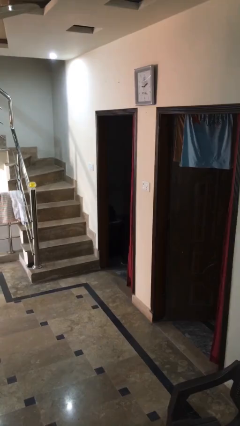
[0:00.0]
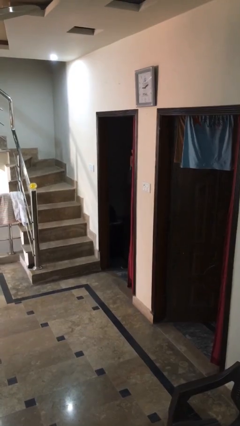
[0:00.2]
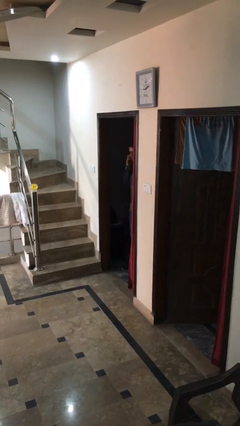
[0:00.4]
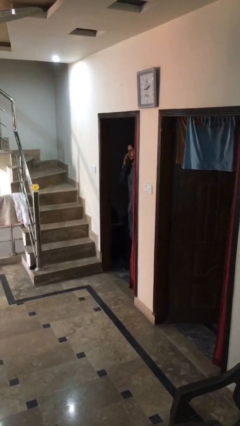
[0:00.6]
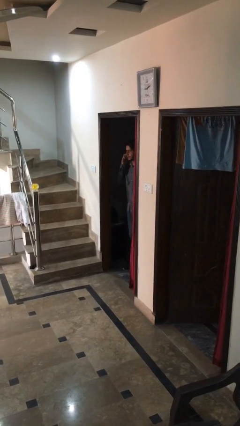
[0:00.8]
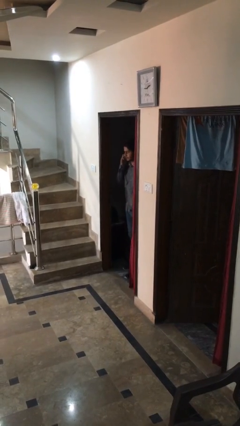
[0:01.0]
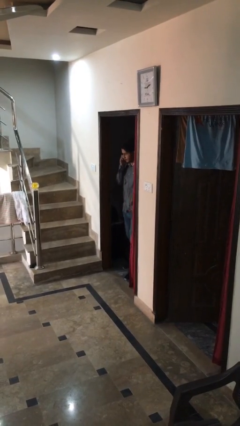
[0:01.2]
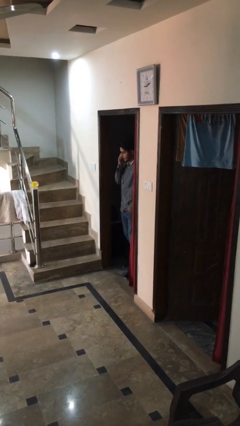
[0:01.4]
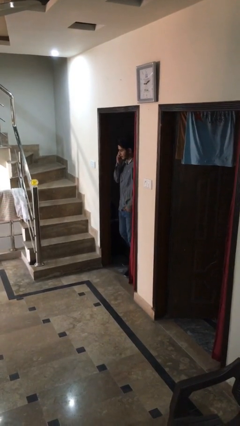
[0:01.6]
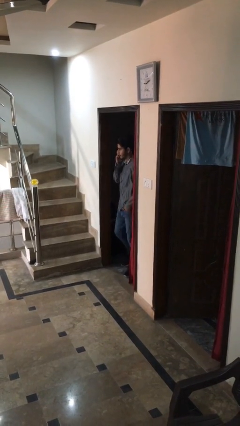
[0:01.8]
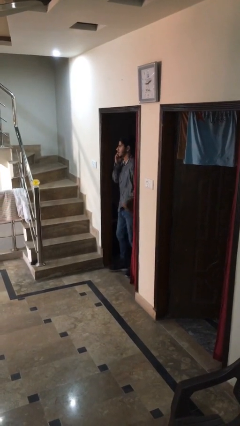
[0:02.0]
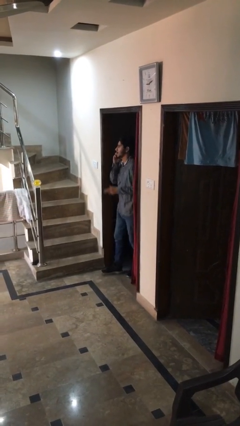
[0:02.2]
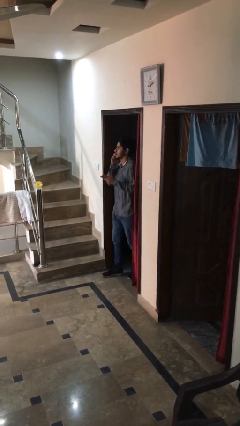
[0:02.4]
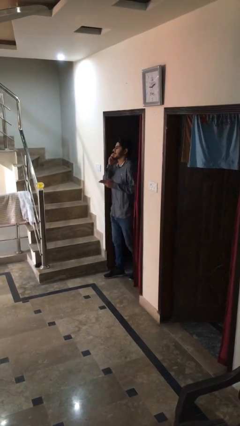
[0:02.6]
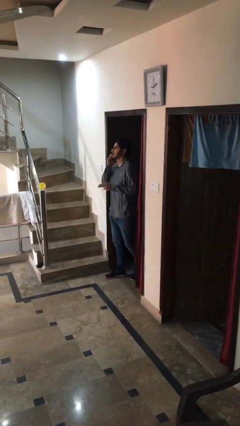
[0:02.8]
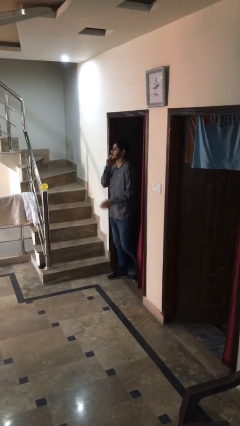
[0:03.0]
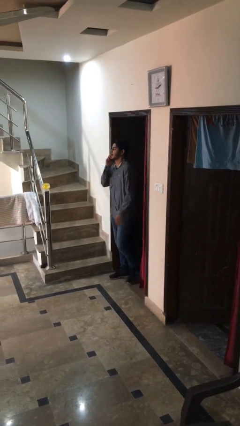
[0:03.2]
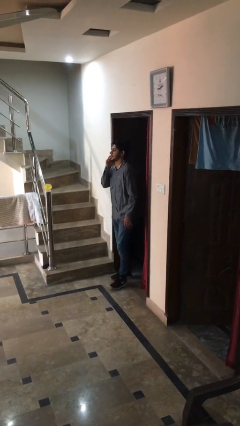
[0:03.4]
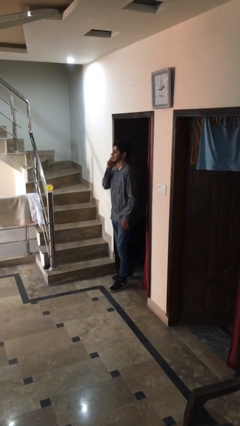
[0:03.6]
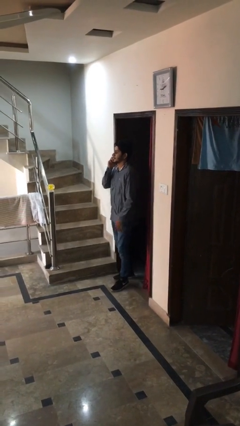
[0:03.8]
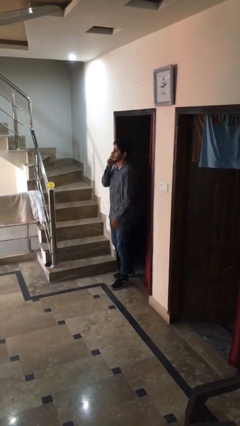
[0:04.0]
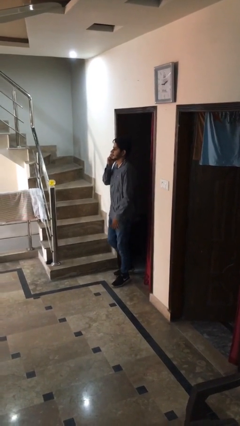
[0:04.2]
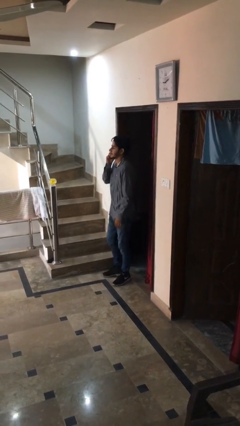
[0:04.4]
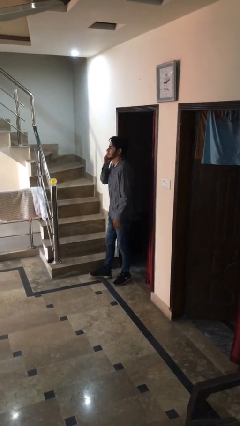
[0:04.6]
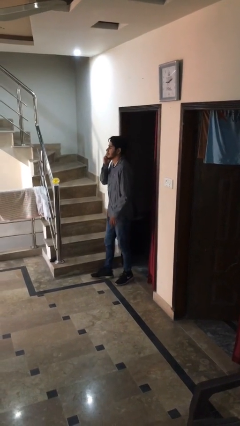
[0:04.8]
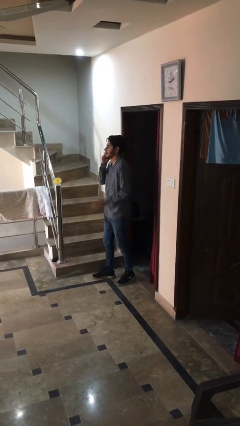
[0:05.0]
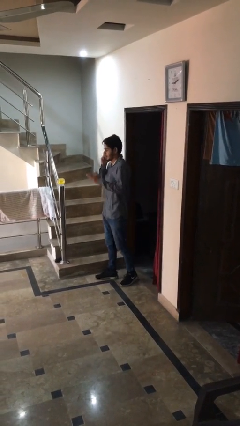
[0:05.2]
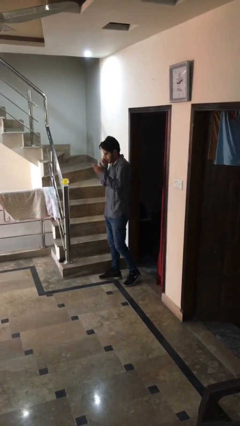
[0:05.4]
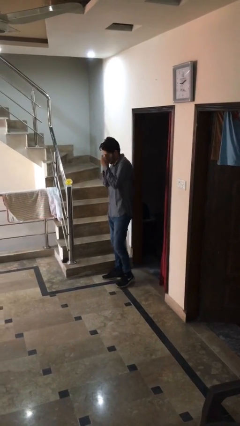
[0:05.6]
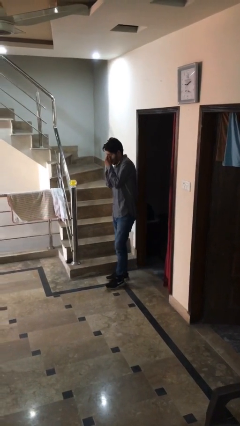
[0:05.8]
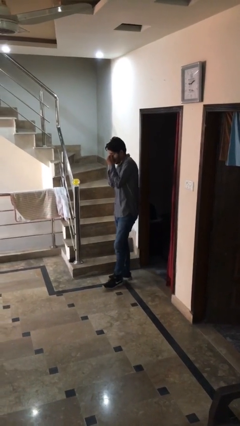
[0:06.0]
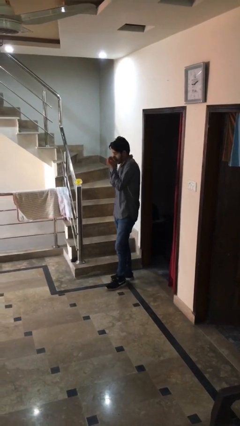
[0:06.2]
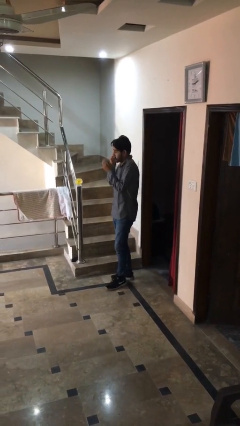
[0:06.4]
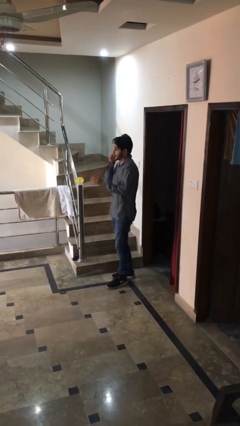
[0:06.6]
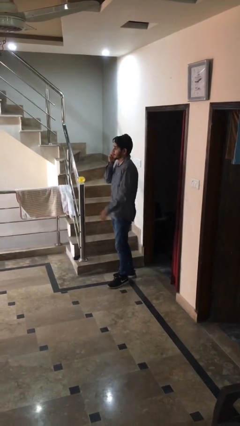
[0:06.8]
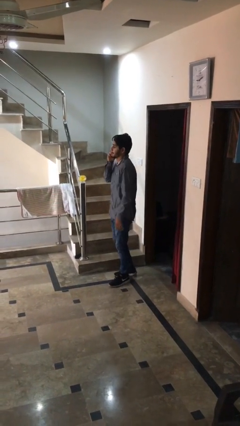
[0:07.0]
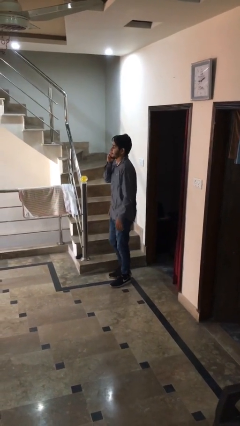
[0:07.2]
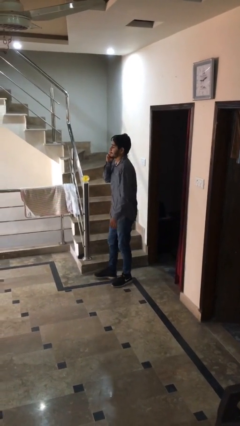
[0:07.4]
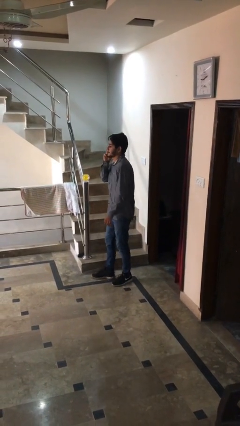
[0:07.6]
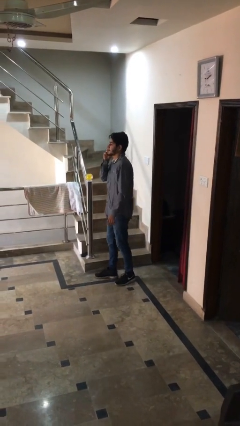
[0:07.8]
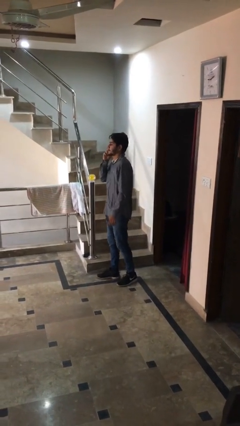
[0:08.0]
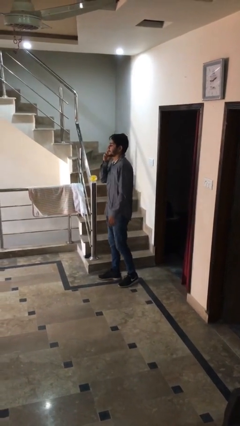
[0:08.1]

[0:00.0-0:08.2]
person enters scene through structure

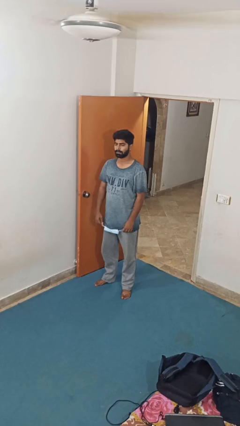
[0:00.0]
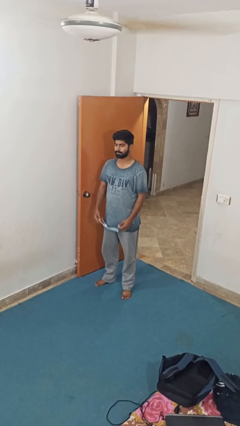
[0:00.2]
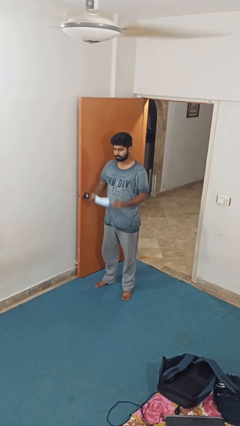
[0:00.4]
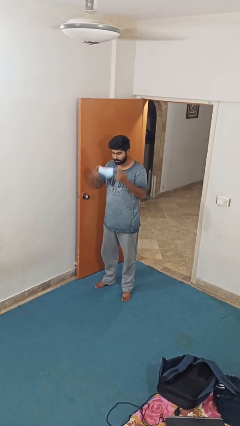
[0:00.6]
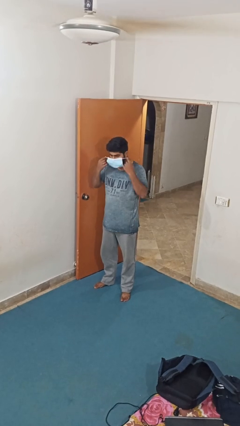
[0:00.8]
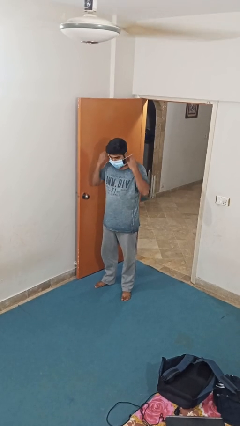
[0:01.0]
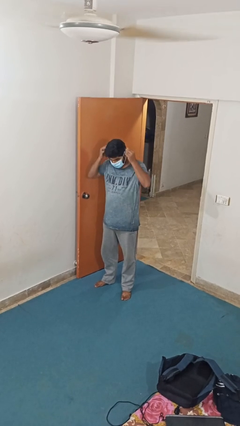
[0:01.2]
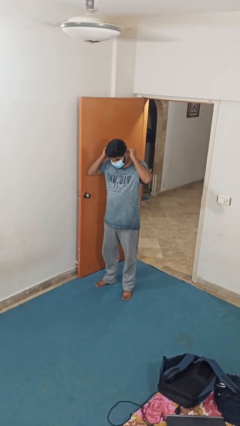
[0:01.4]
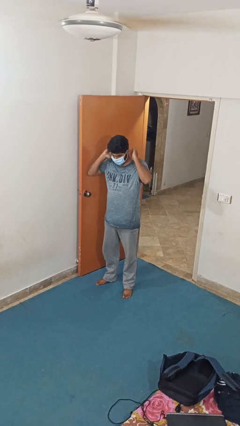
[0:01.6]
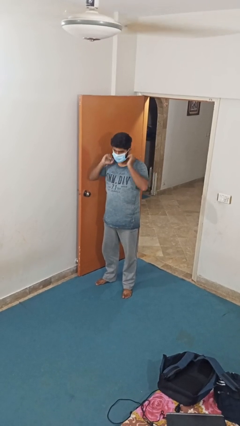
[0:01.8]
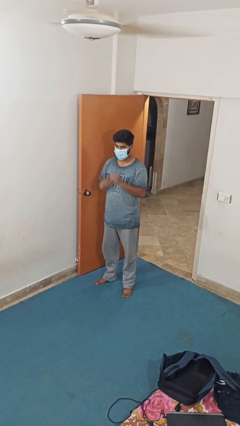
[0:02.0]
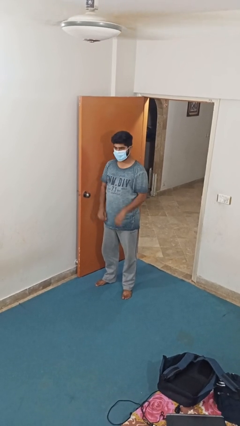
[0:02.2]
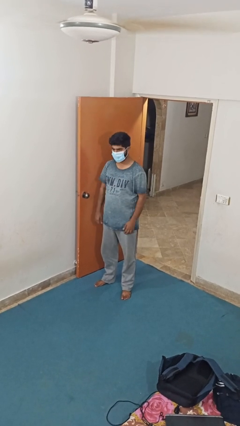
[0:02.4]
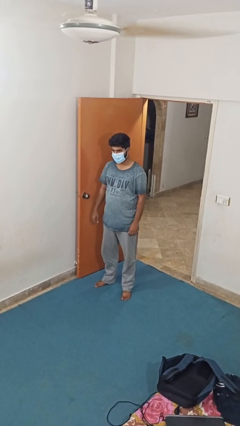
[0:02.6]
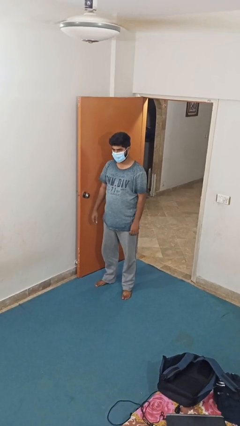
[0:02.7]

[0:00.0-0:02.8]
person puts on facemask

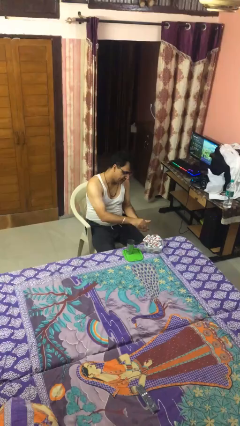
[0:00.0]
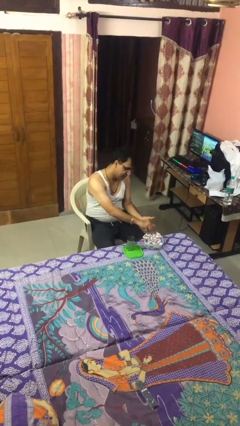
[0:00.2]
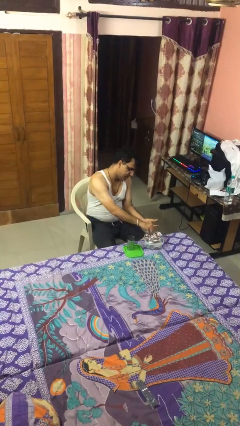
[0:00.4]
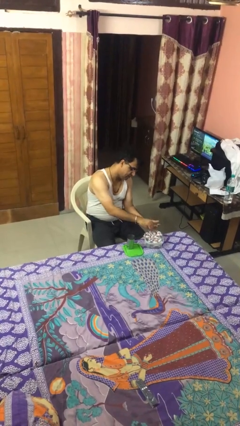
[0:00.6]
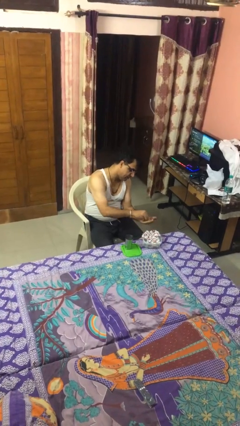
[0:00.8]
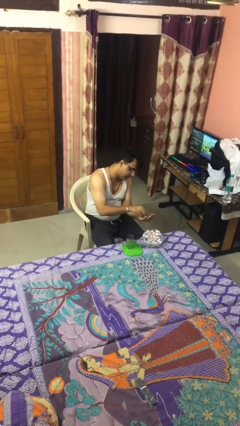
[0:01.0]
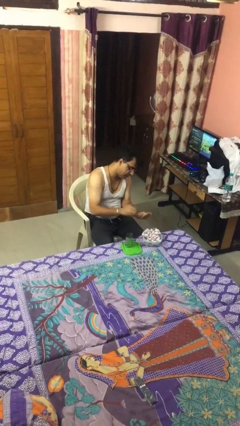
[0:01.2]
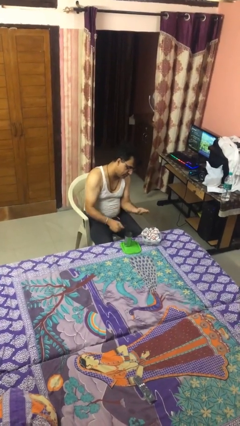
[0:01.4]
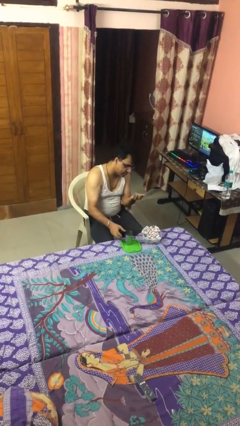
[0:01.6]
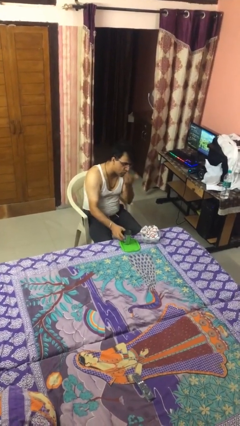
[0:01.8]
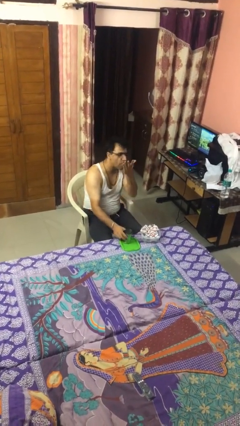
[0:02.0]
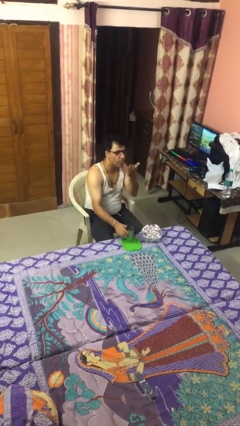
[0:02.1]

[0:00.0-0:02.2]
person takes medicine pills

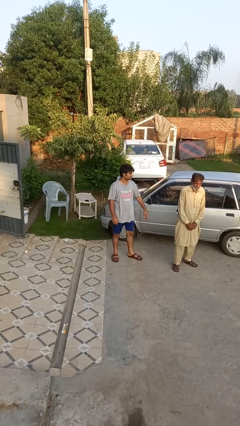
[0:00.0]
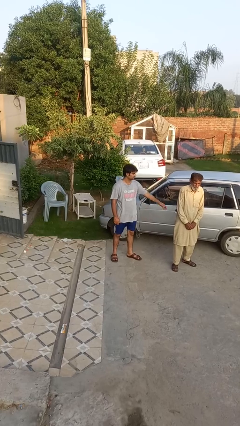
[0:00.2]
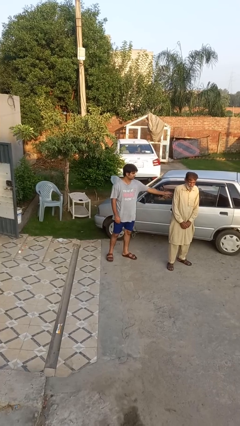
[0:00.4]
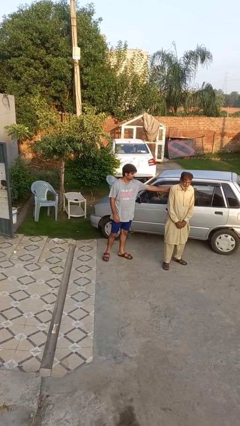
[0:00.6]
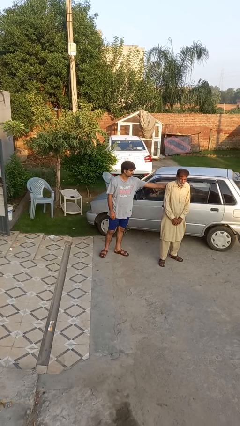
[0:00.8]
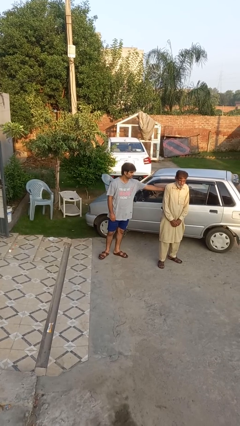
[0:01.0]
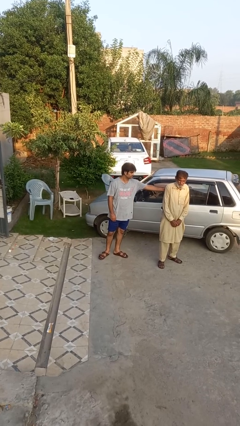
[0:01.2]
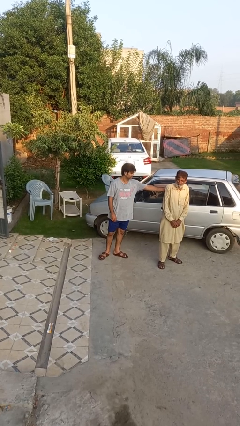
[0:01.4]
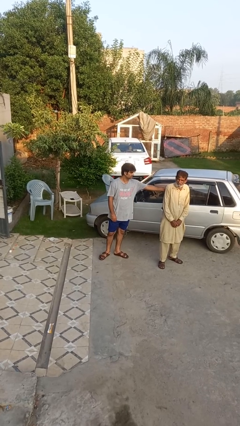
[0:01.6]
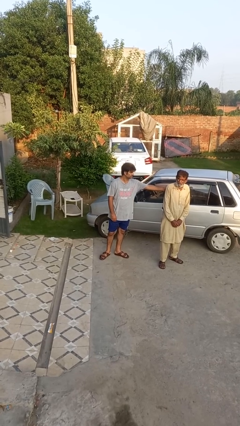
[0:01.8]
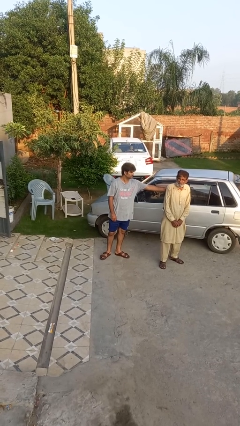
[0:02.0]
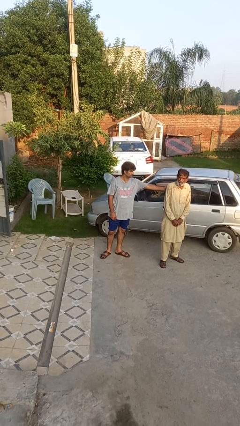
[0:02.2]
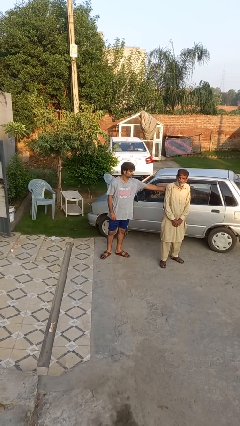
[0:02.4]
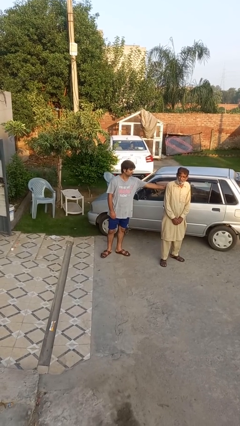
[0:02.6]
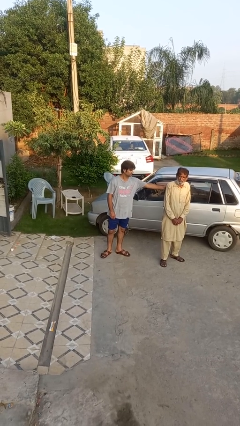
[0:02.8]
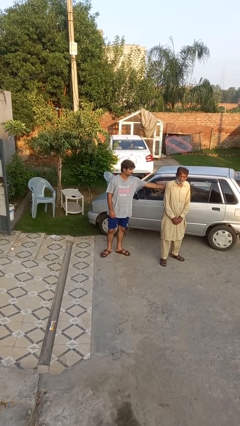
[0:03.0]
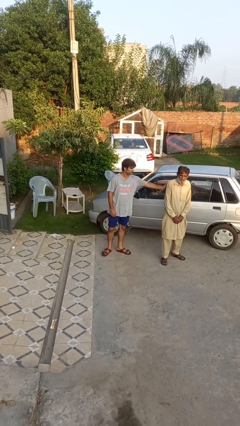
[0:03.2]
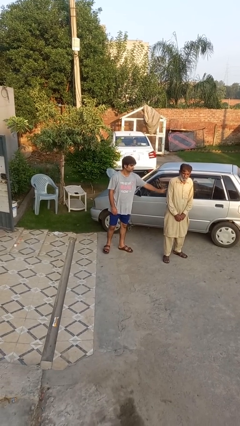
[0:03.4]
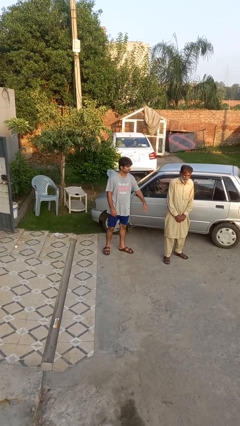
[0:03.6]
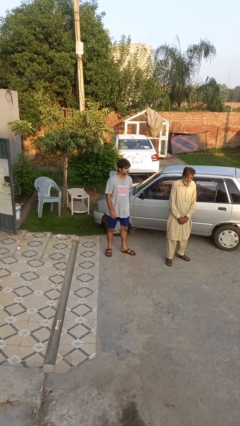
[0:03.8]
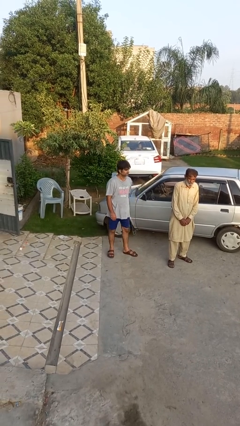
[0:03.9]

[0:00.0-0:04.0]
person touches back of person

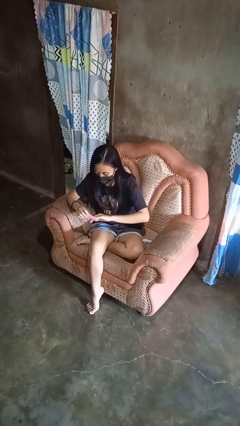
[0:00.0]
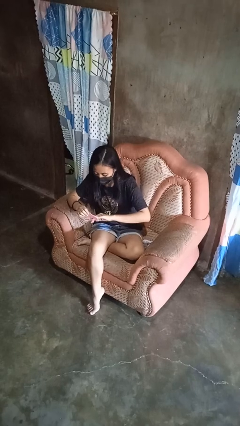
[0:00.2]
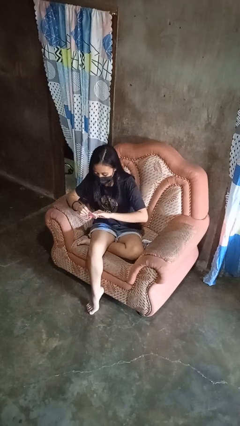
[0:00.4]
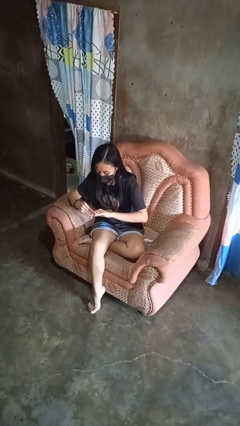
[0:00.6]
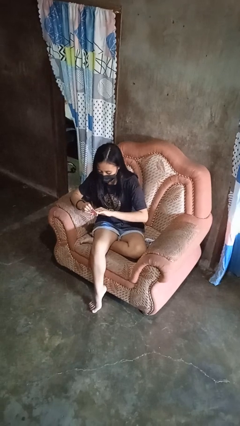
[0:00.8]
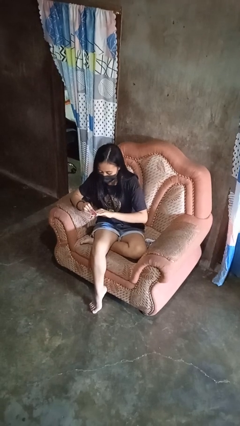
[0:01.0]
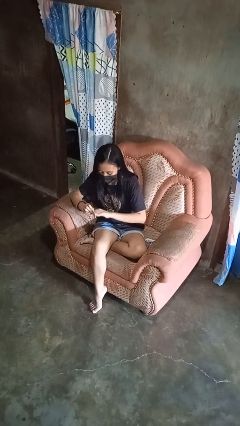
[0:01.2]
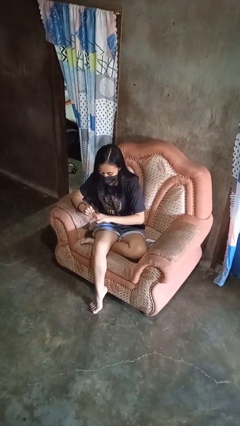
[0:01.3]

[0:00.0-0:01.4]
person files fingernails
